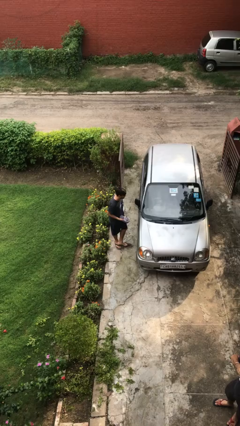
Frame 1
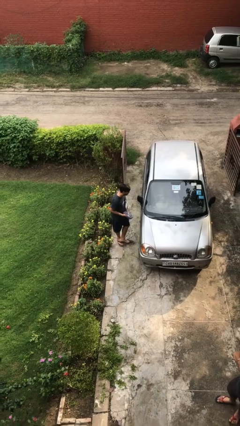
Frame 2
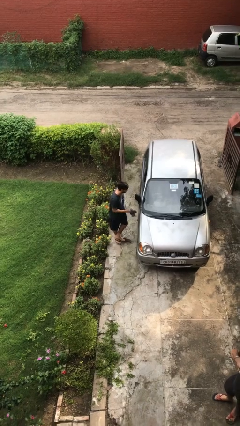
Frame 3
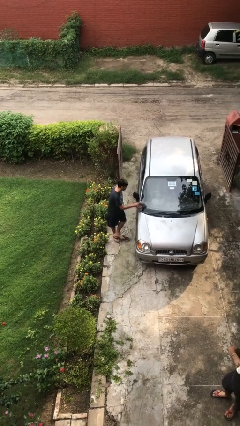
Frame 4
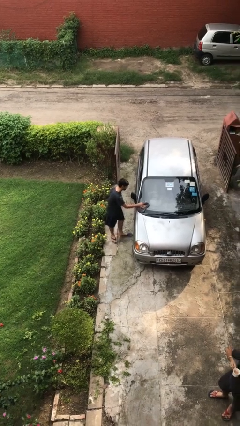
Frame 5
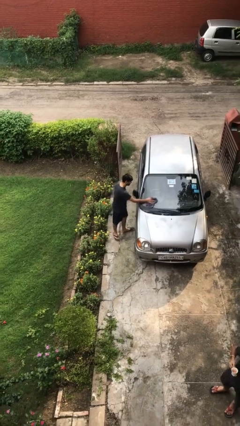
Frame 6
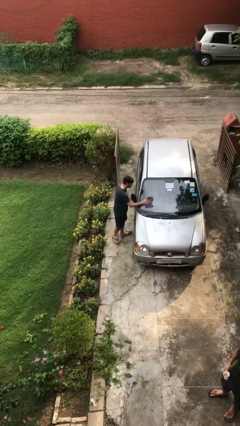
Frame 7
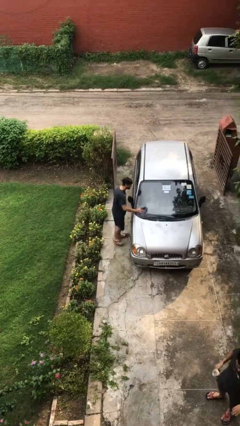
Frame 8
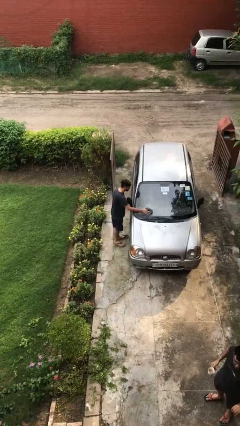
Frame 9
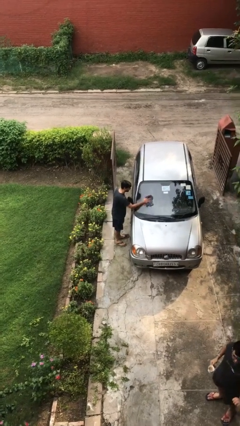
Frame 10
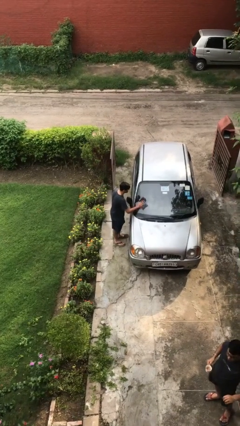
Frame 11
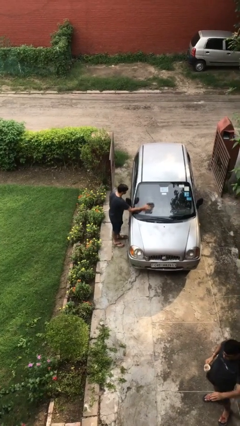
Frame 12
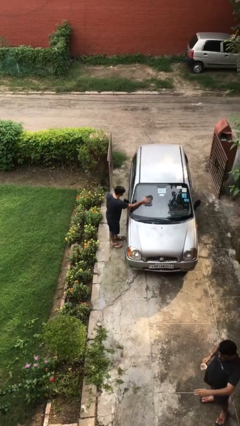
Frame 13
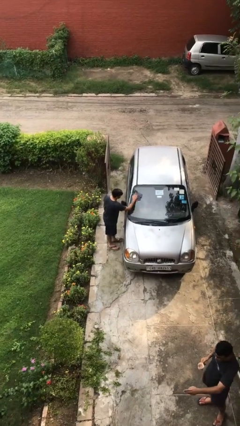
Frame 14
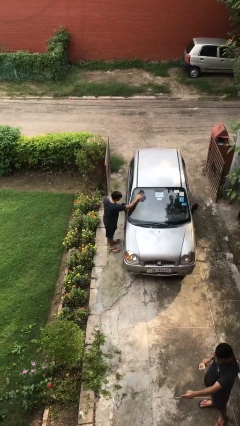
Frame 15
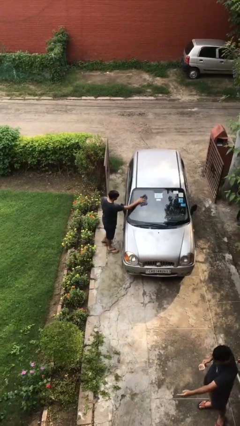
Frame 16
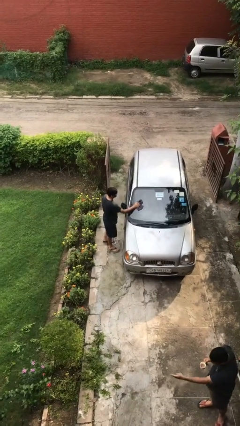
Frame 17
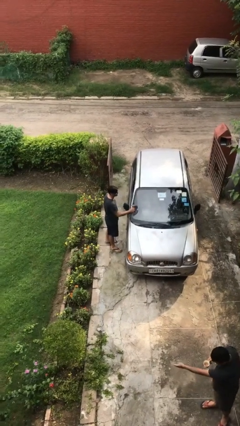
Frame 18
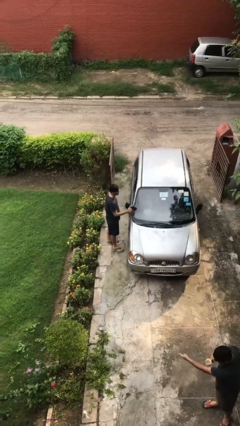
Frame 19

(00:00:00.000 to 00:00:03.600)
person polishes car with rag

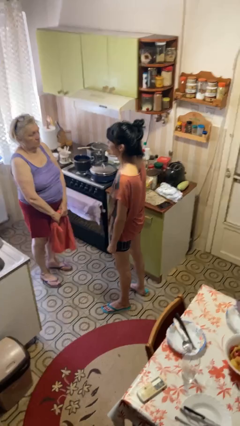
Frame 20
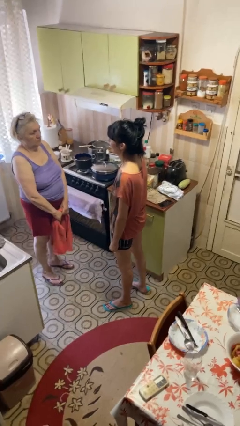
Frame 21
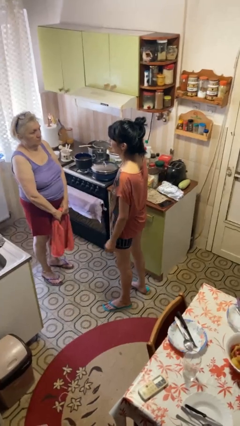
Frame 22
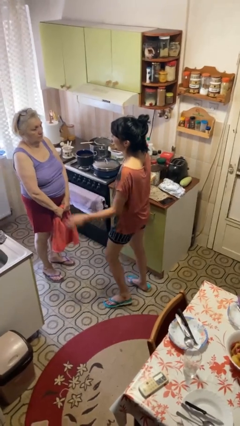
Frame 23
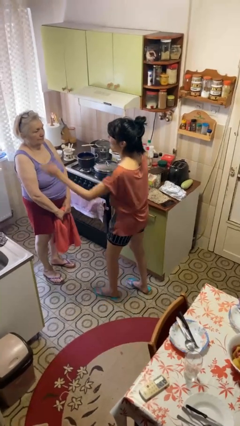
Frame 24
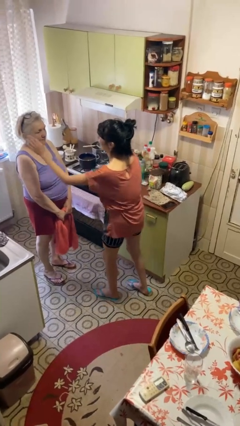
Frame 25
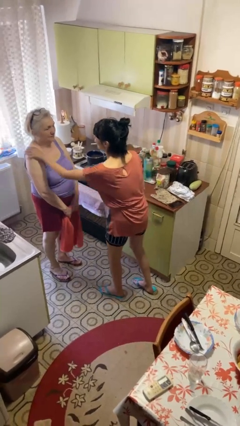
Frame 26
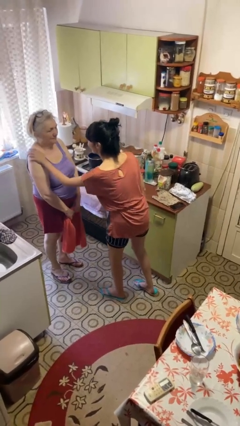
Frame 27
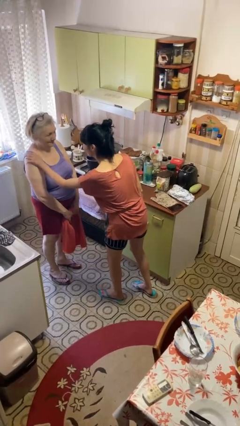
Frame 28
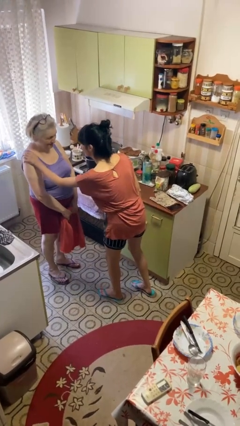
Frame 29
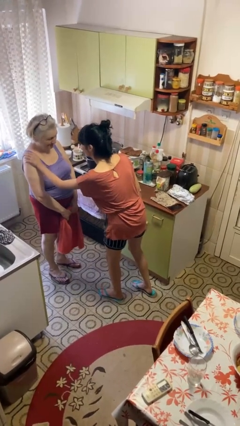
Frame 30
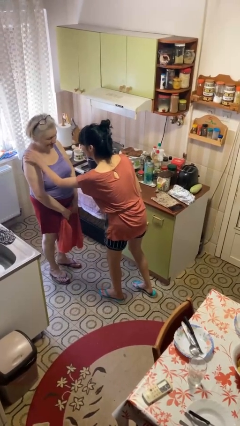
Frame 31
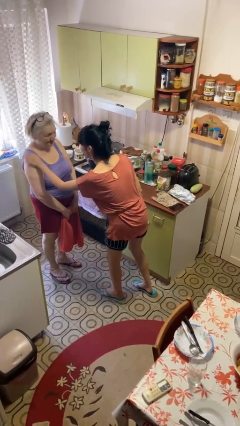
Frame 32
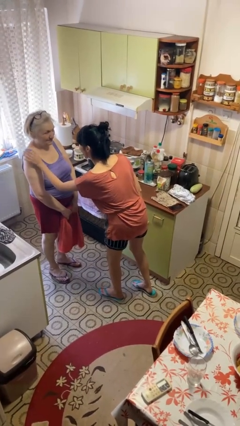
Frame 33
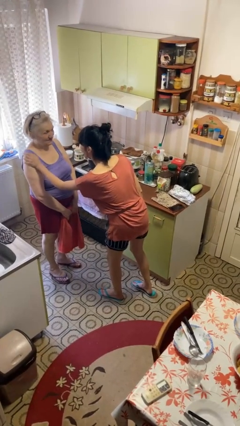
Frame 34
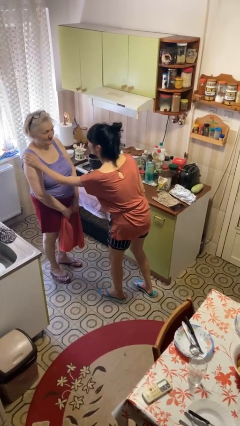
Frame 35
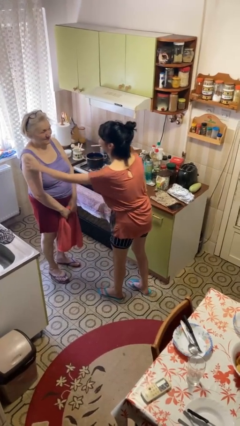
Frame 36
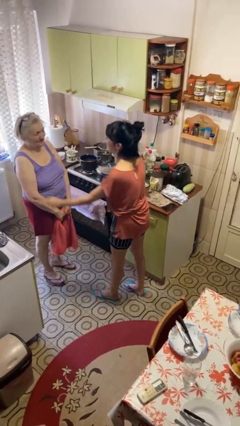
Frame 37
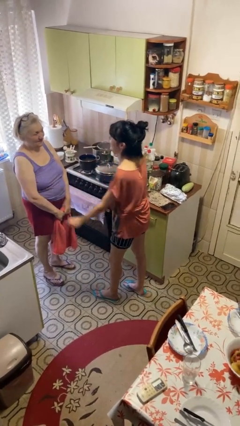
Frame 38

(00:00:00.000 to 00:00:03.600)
person pounds shoulders of person

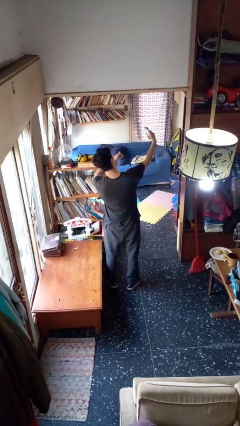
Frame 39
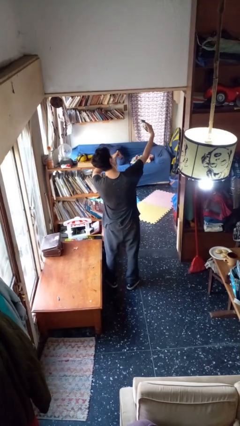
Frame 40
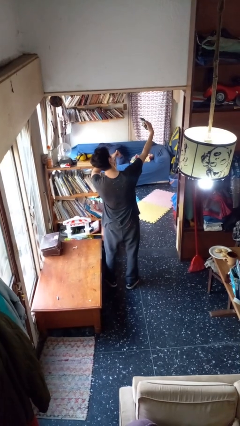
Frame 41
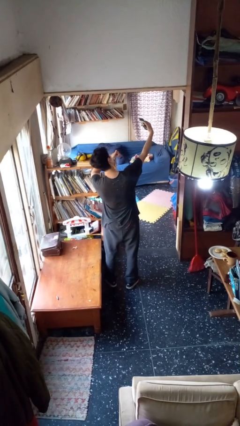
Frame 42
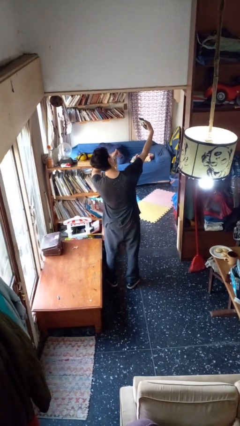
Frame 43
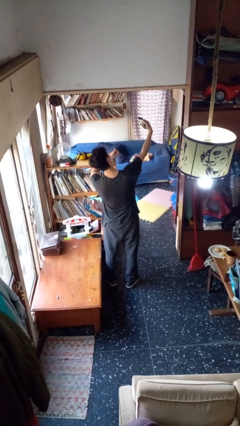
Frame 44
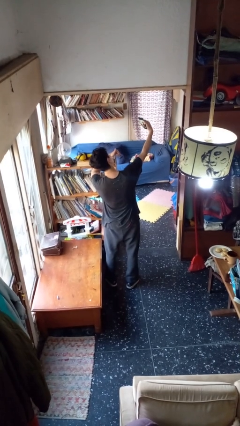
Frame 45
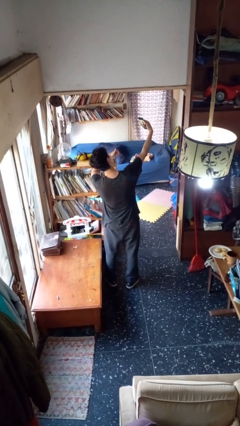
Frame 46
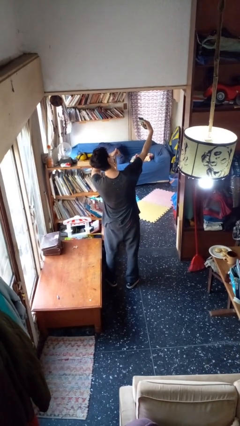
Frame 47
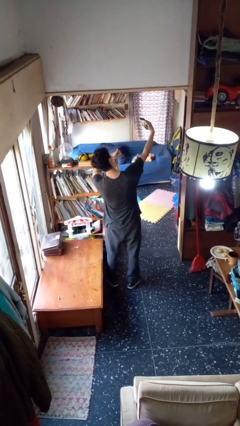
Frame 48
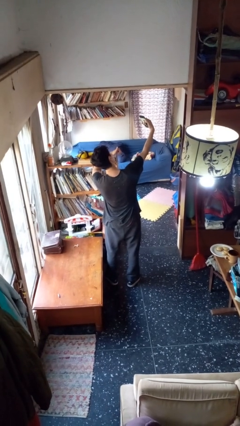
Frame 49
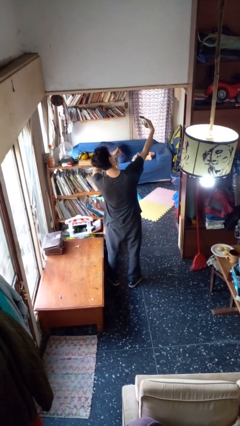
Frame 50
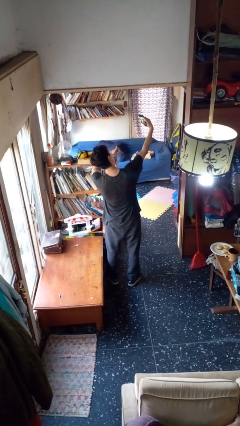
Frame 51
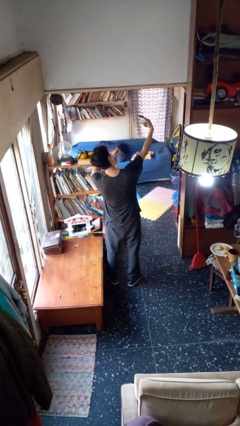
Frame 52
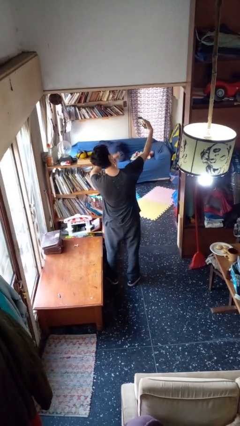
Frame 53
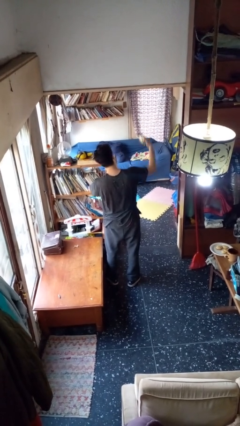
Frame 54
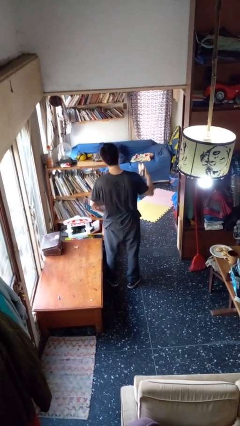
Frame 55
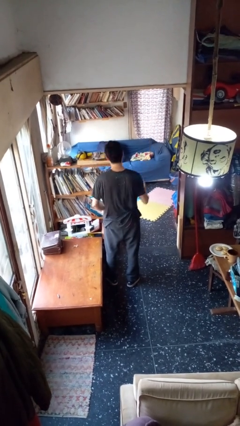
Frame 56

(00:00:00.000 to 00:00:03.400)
person takes selfie

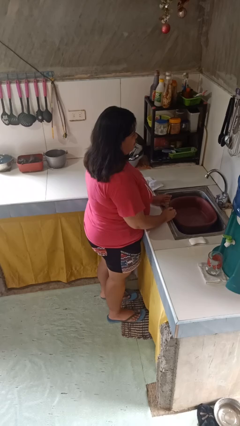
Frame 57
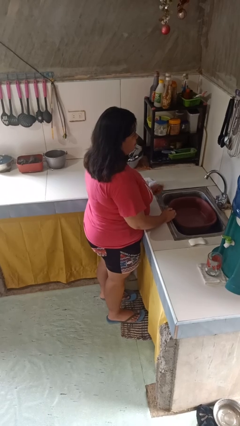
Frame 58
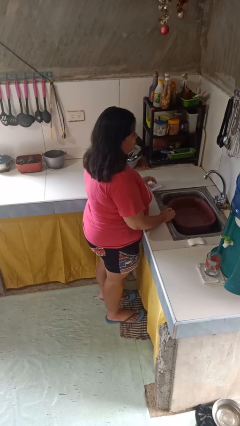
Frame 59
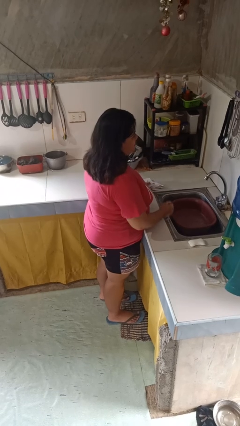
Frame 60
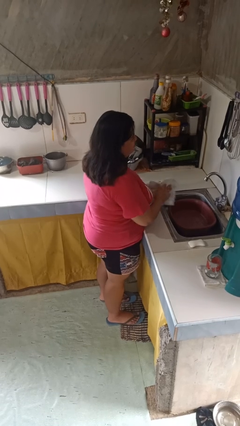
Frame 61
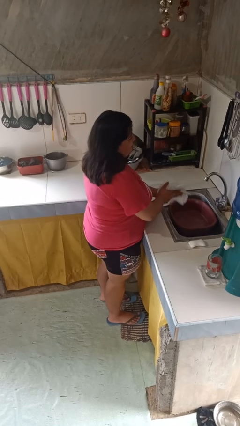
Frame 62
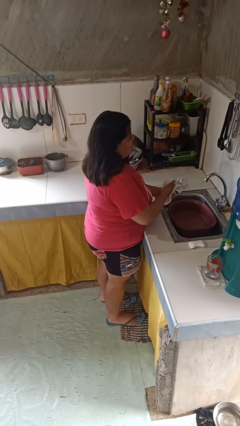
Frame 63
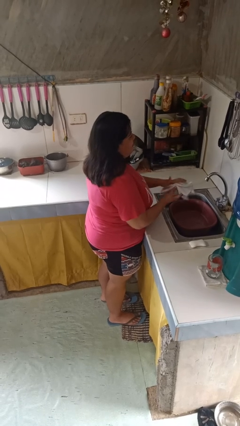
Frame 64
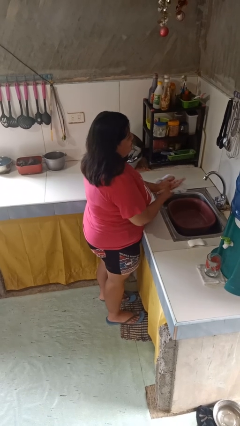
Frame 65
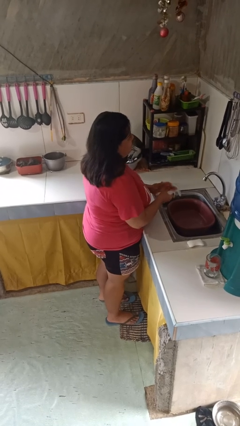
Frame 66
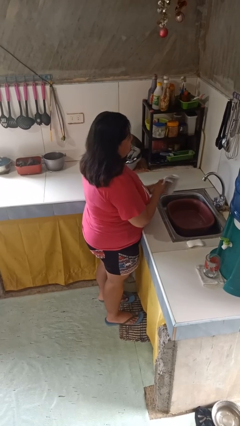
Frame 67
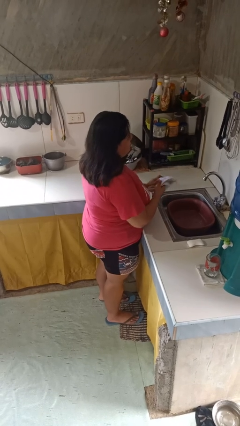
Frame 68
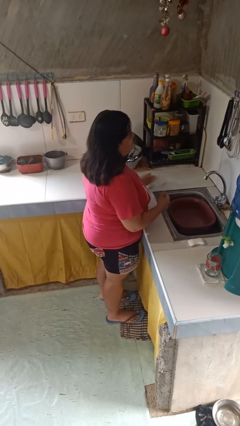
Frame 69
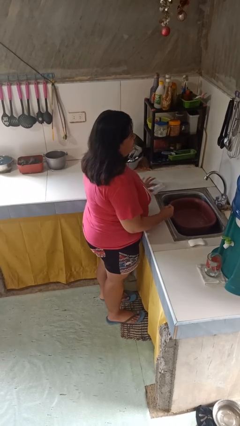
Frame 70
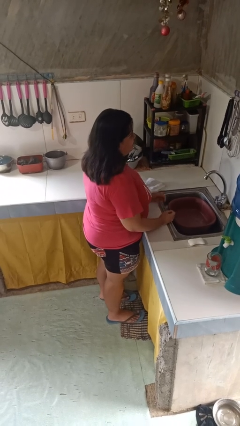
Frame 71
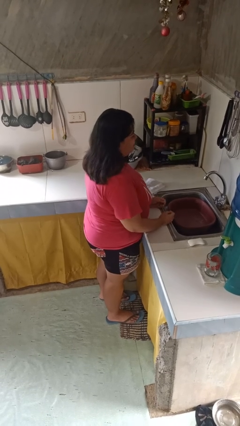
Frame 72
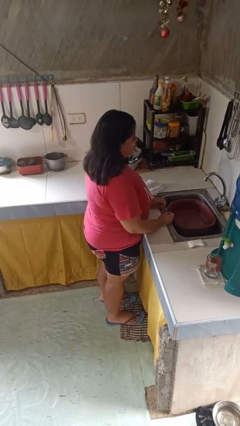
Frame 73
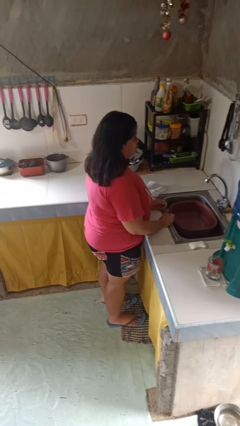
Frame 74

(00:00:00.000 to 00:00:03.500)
person dries hands with towel

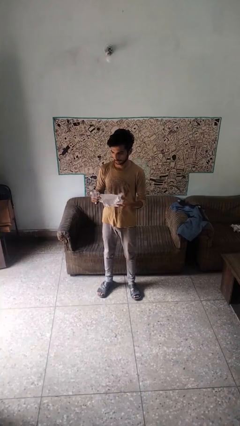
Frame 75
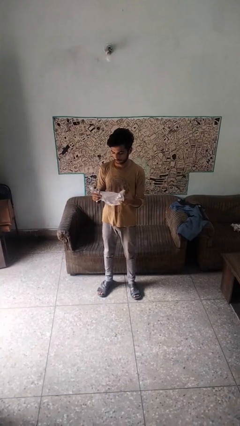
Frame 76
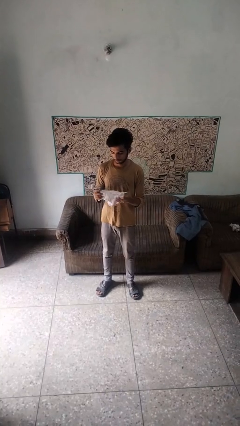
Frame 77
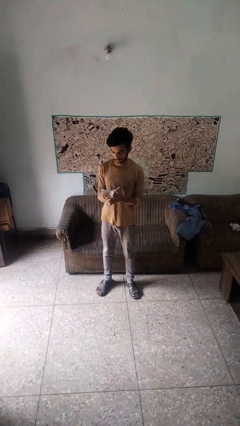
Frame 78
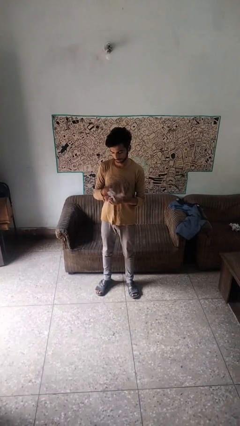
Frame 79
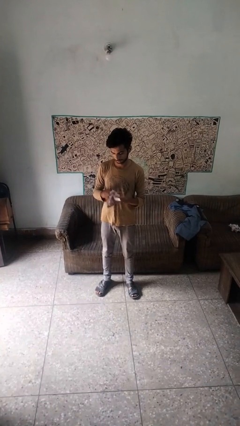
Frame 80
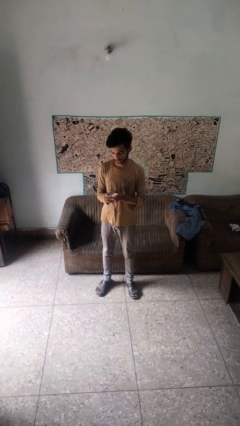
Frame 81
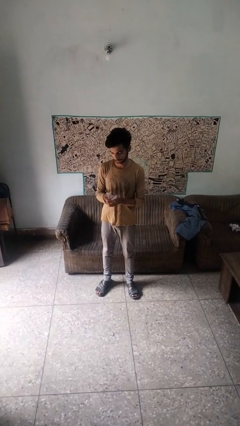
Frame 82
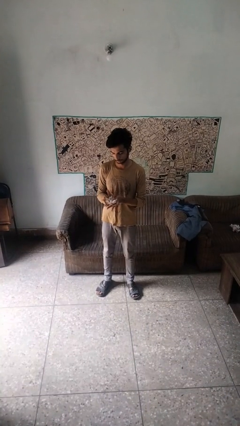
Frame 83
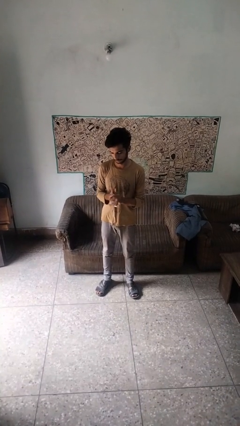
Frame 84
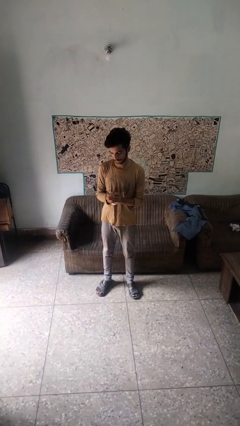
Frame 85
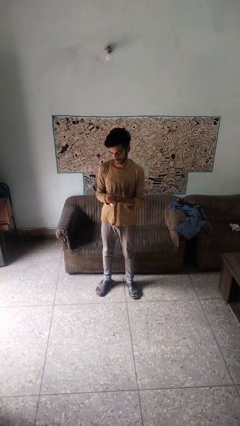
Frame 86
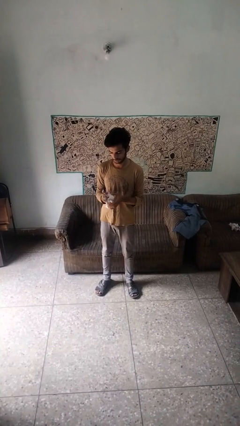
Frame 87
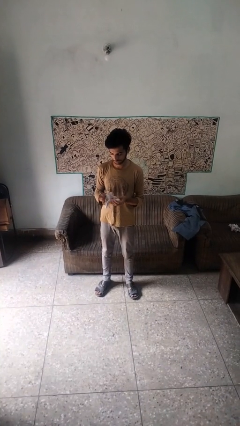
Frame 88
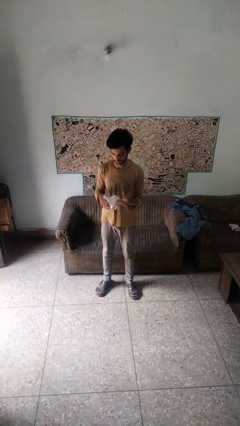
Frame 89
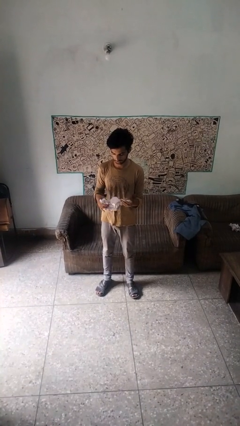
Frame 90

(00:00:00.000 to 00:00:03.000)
person crumples paper

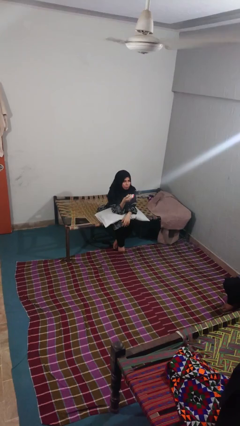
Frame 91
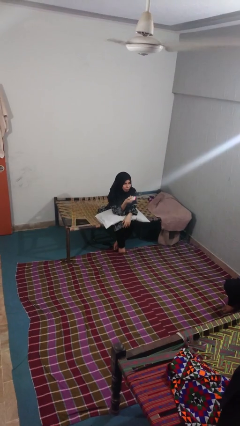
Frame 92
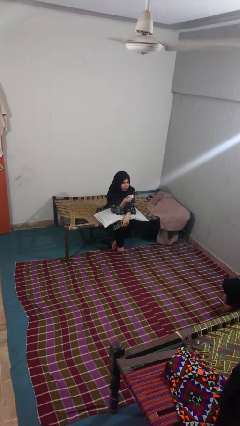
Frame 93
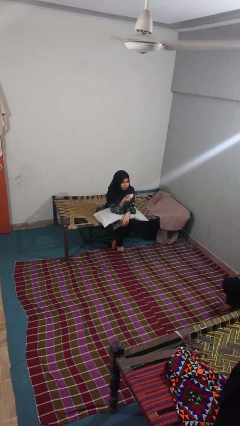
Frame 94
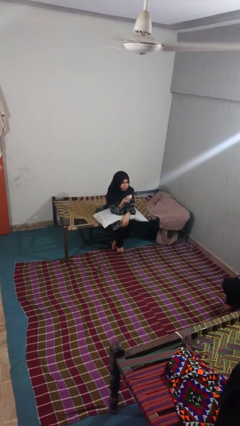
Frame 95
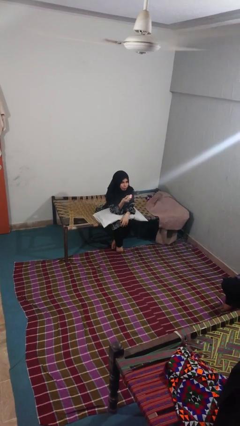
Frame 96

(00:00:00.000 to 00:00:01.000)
person uses television remote
